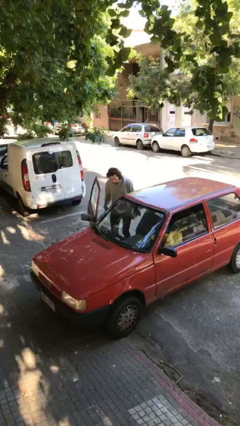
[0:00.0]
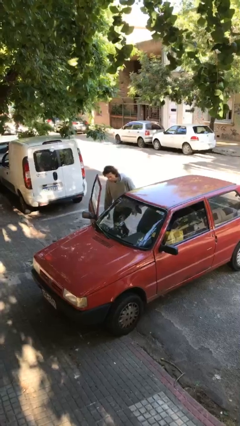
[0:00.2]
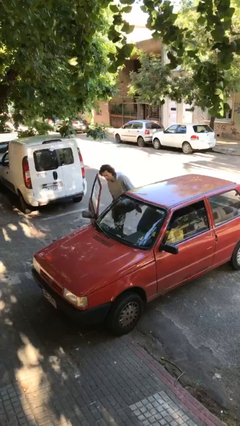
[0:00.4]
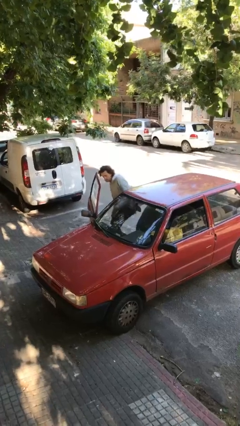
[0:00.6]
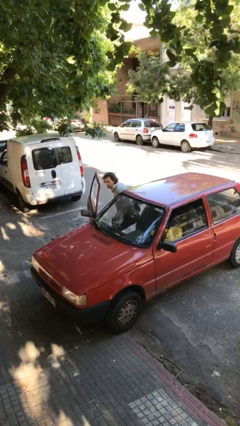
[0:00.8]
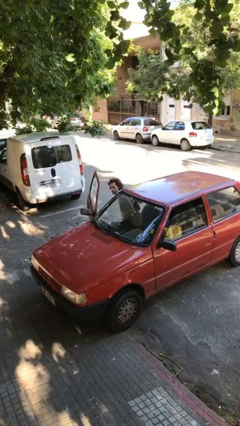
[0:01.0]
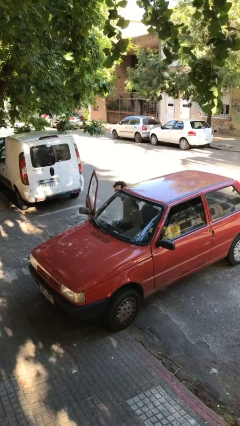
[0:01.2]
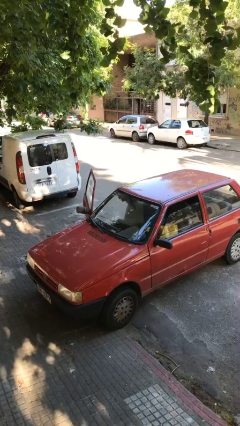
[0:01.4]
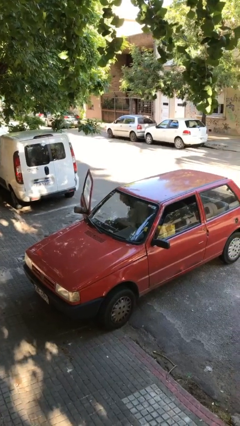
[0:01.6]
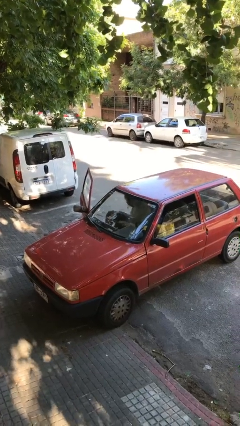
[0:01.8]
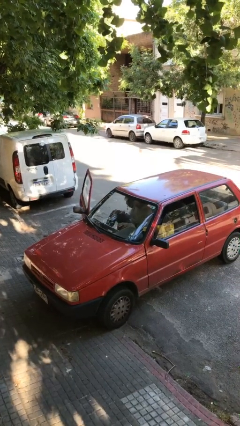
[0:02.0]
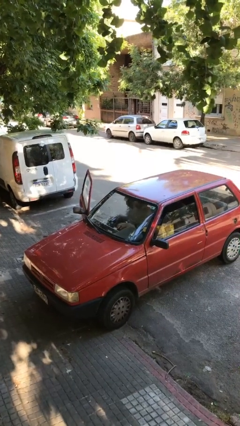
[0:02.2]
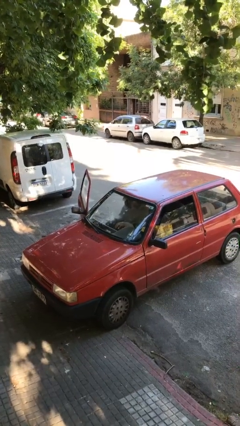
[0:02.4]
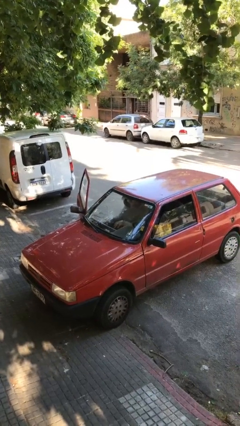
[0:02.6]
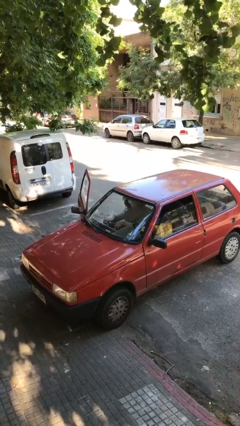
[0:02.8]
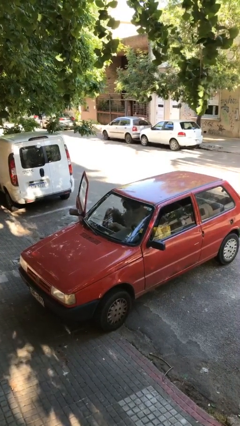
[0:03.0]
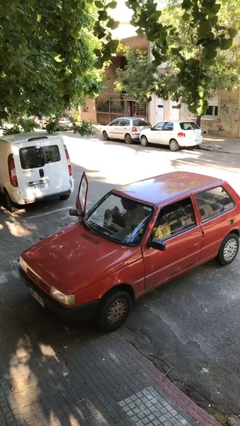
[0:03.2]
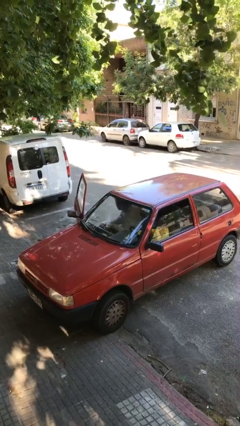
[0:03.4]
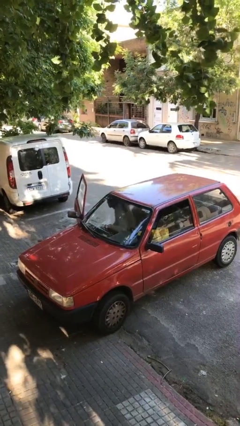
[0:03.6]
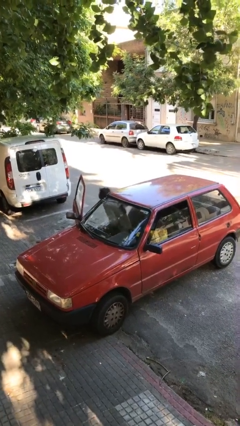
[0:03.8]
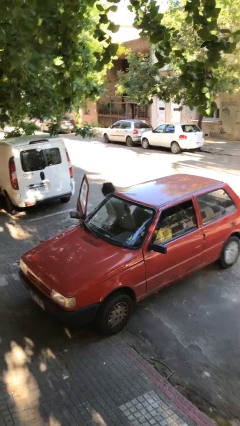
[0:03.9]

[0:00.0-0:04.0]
person enters car

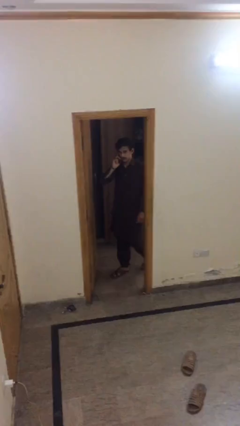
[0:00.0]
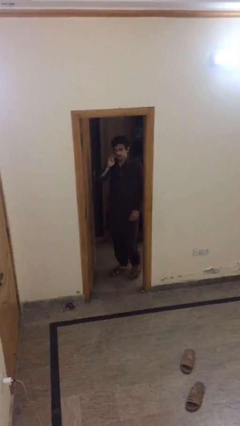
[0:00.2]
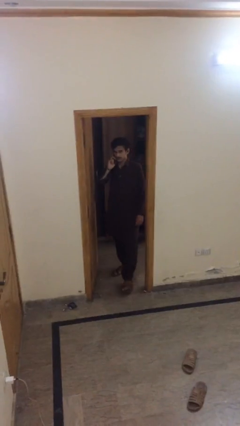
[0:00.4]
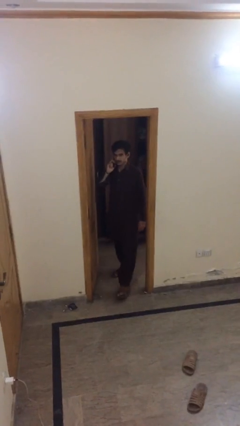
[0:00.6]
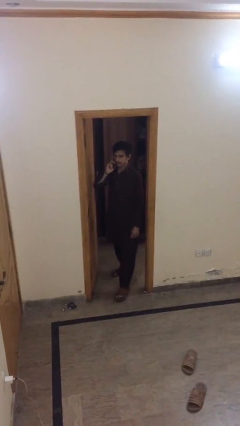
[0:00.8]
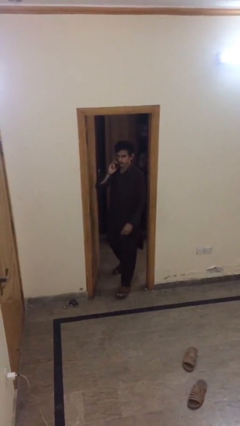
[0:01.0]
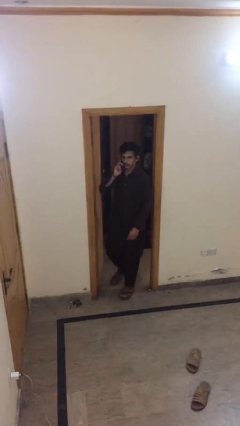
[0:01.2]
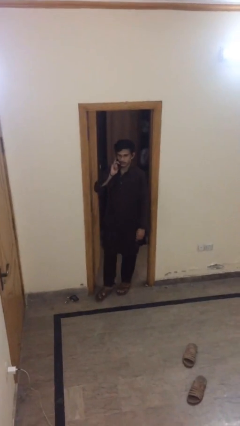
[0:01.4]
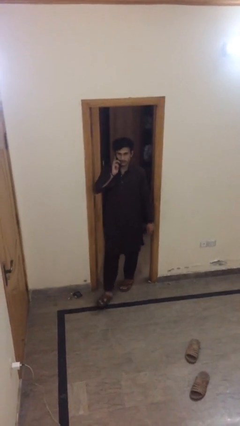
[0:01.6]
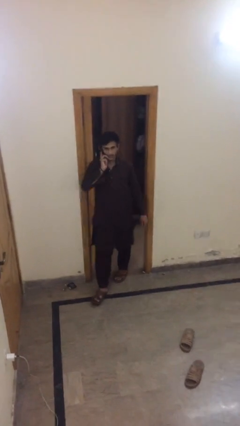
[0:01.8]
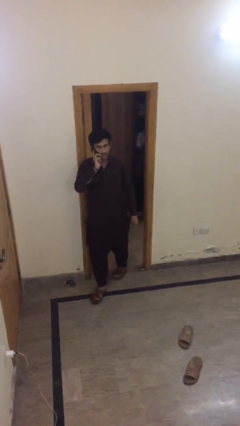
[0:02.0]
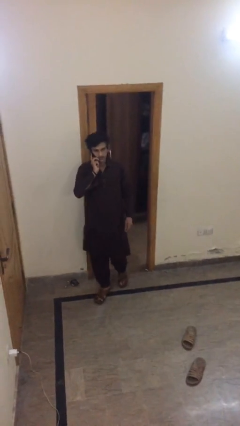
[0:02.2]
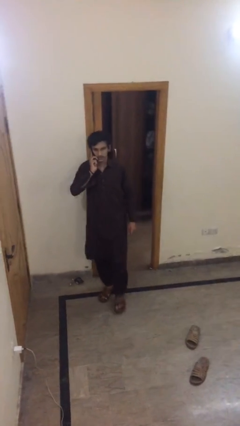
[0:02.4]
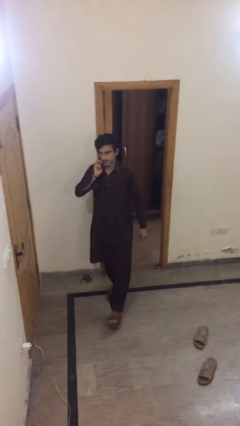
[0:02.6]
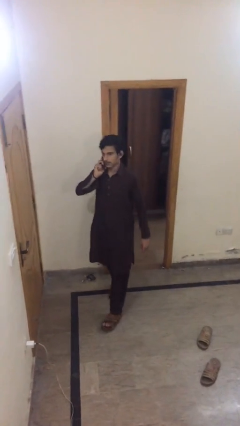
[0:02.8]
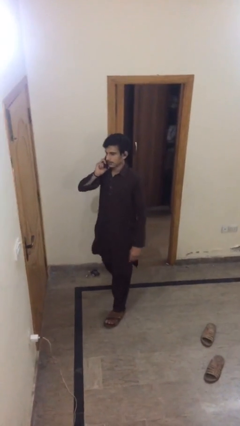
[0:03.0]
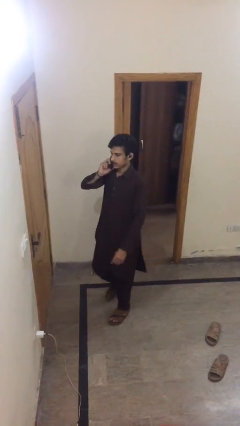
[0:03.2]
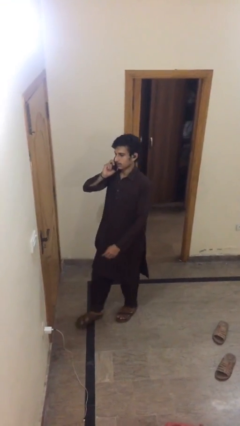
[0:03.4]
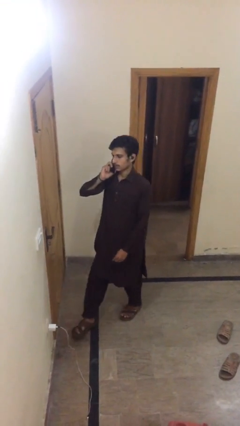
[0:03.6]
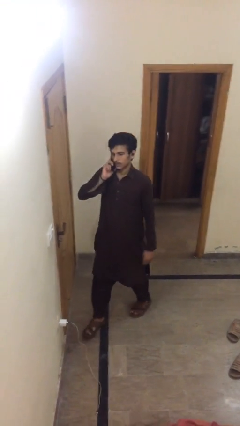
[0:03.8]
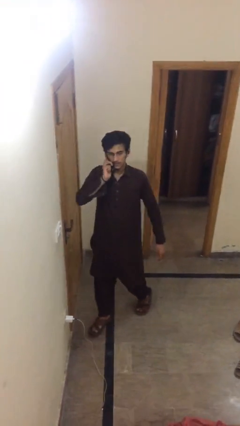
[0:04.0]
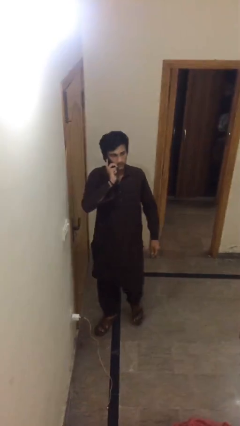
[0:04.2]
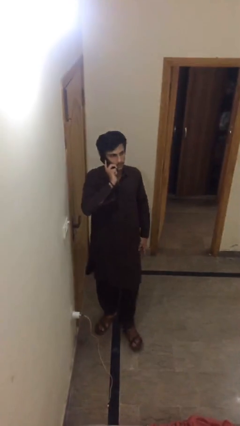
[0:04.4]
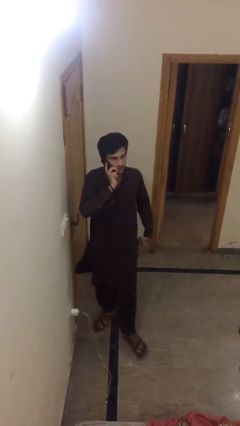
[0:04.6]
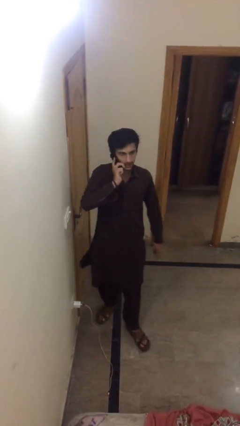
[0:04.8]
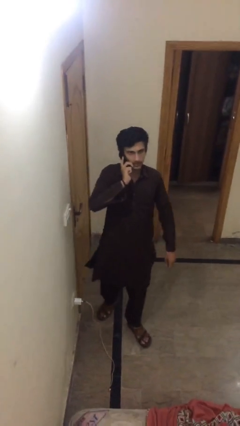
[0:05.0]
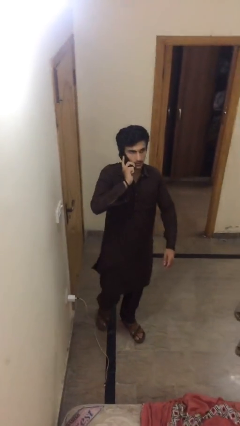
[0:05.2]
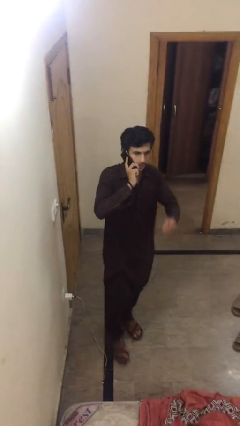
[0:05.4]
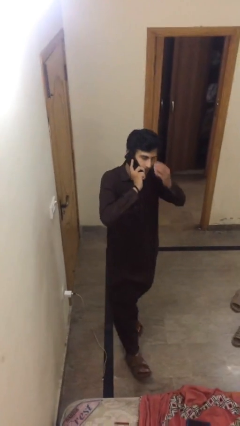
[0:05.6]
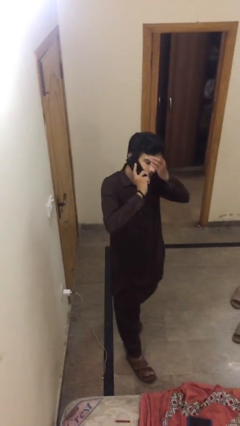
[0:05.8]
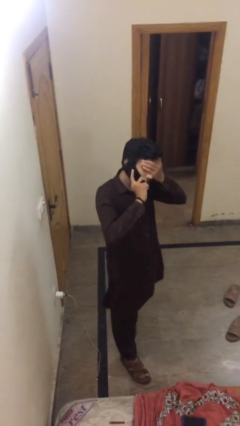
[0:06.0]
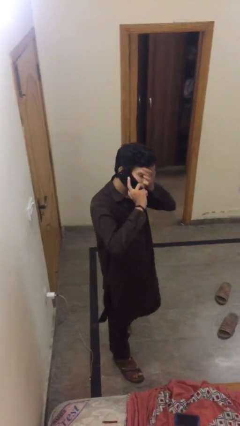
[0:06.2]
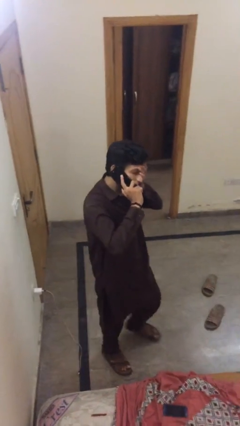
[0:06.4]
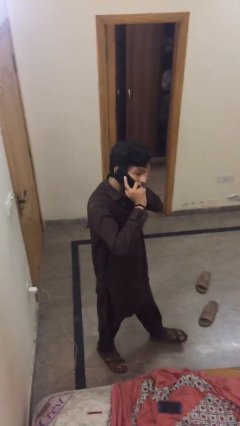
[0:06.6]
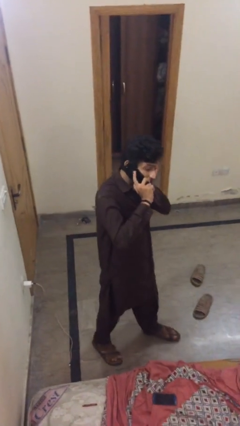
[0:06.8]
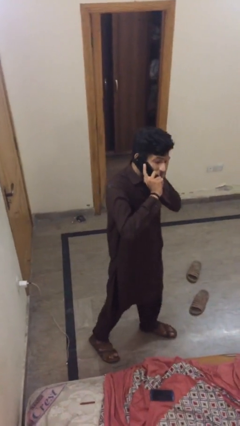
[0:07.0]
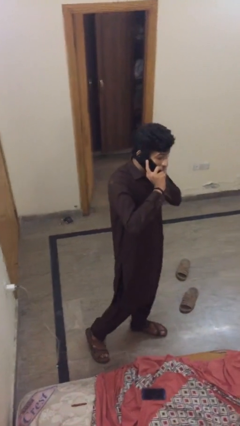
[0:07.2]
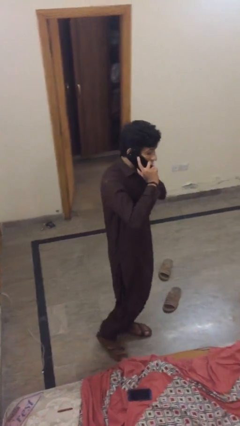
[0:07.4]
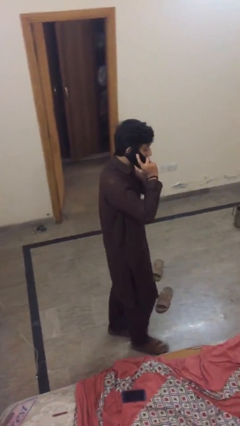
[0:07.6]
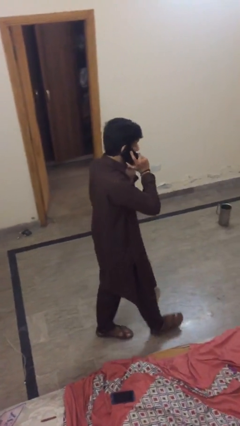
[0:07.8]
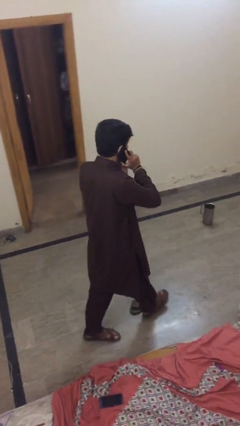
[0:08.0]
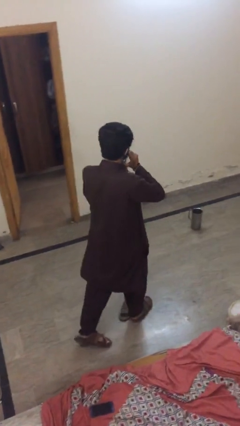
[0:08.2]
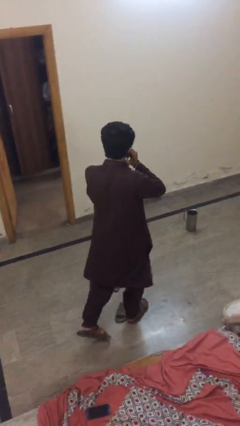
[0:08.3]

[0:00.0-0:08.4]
person enters scene through structure

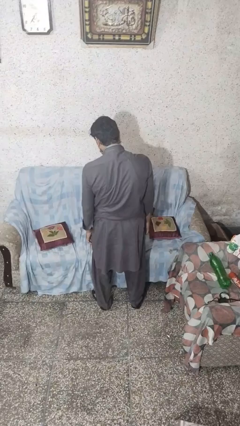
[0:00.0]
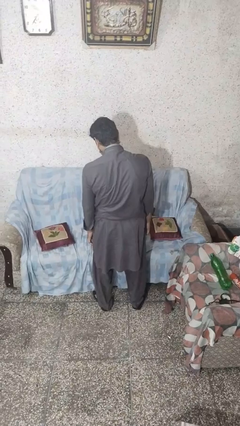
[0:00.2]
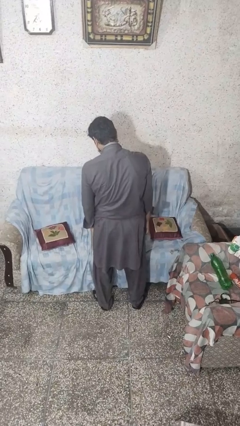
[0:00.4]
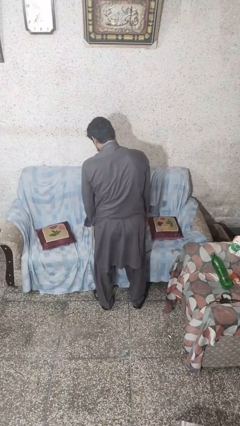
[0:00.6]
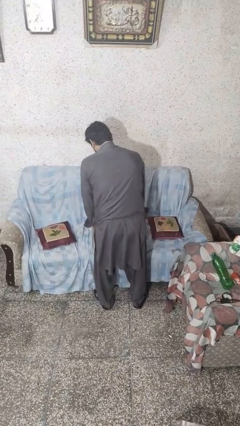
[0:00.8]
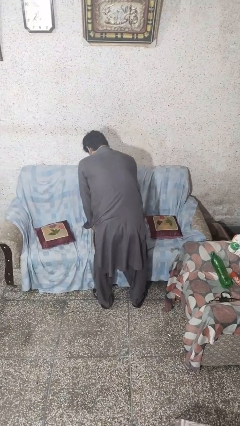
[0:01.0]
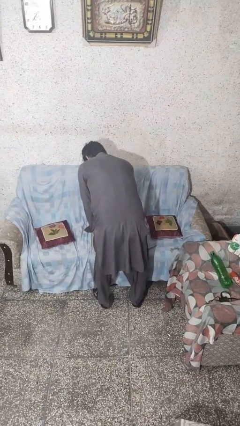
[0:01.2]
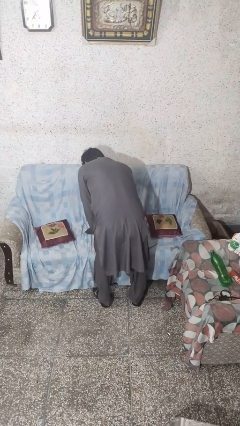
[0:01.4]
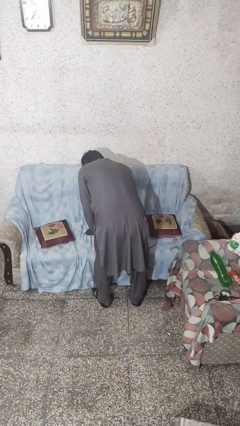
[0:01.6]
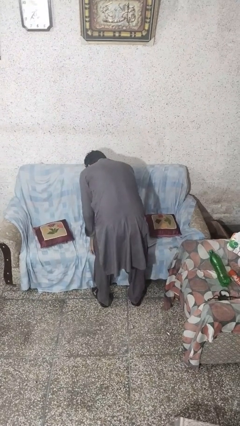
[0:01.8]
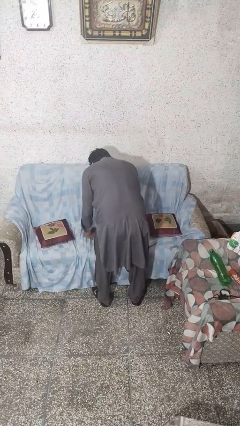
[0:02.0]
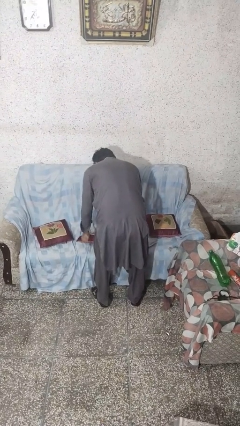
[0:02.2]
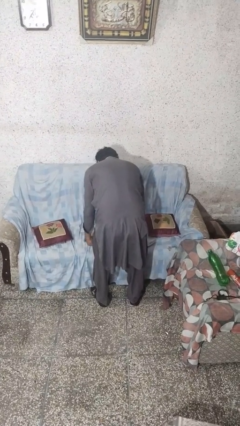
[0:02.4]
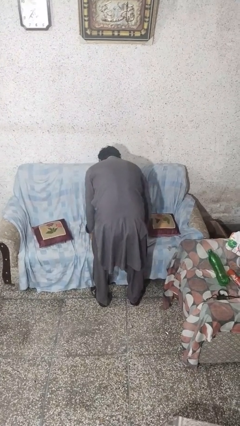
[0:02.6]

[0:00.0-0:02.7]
person searches in couch

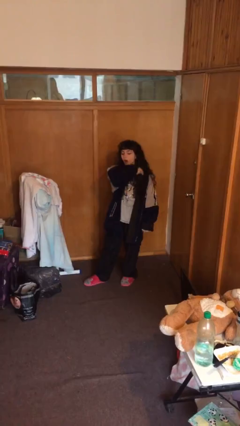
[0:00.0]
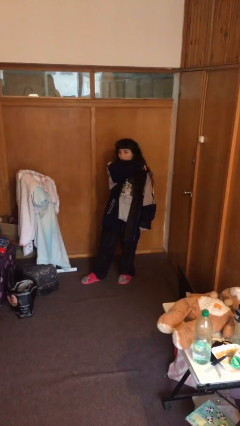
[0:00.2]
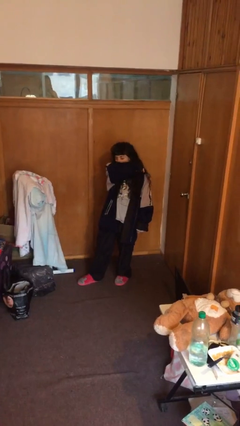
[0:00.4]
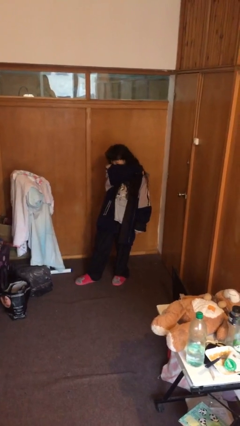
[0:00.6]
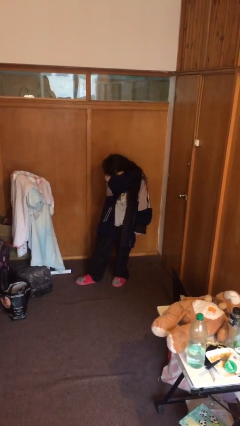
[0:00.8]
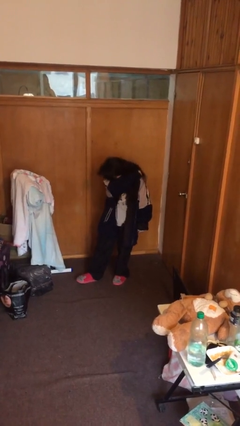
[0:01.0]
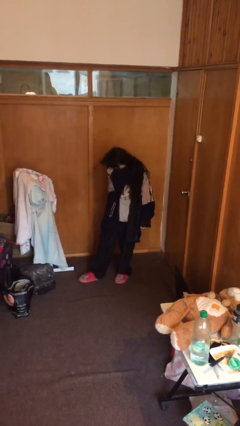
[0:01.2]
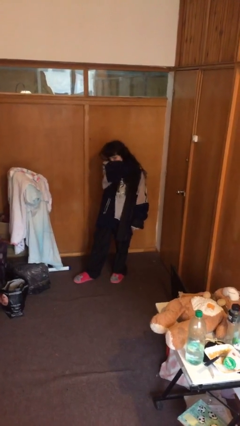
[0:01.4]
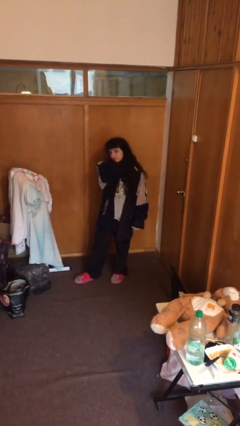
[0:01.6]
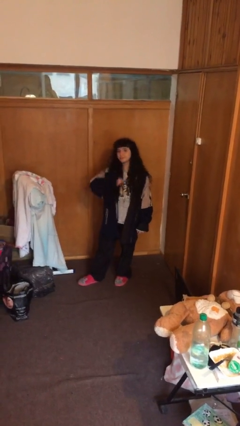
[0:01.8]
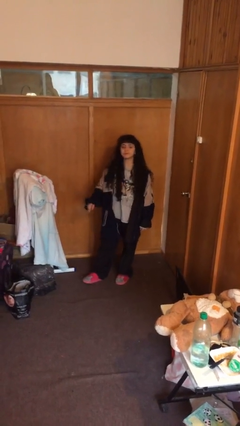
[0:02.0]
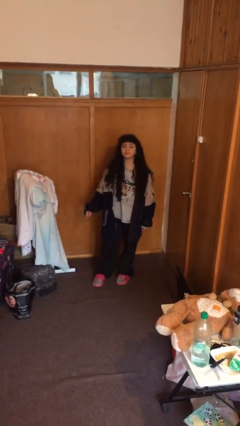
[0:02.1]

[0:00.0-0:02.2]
person sneezes into arm

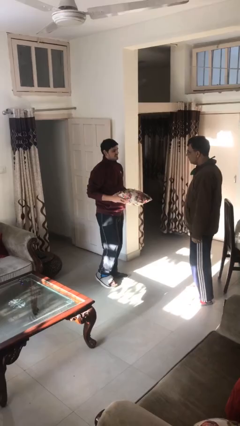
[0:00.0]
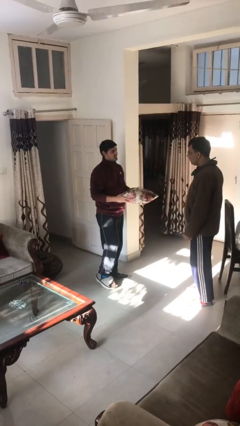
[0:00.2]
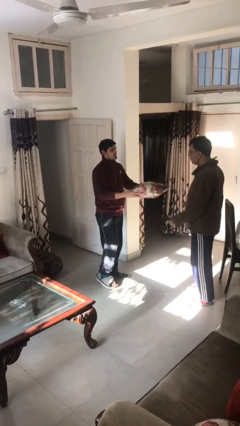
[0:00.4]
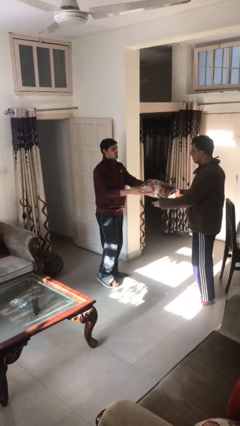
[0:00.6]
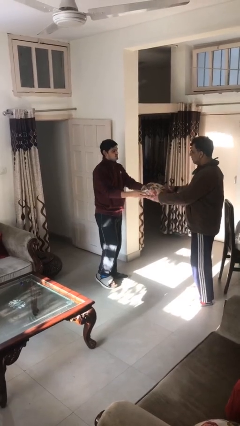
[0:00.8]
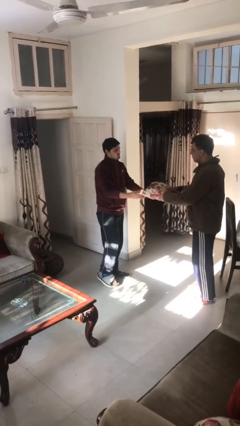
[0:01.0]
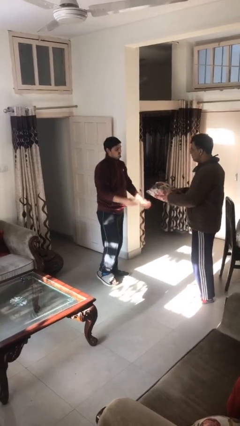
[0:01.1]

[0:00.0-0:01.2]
person transfers object to person
